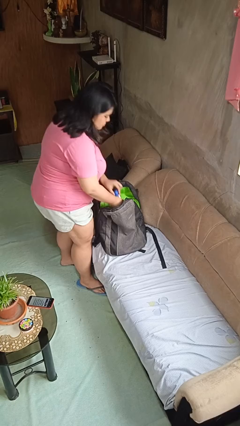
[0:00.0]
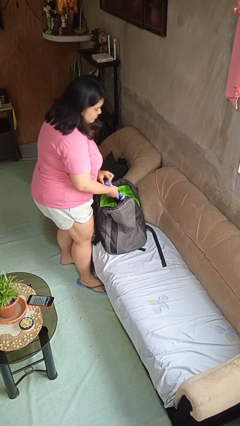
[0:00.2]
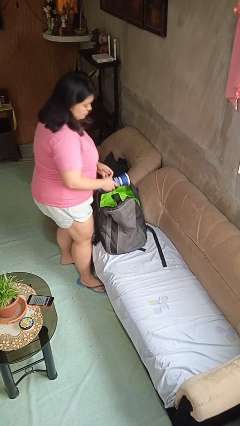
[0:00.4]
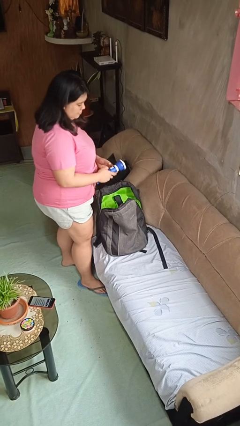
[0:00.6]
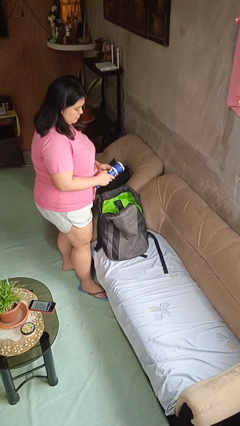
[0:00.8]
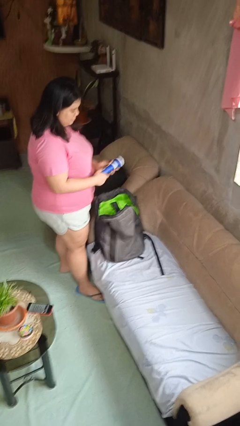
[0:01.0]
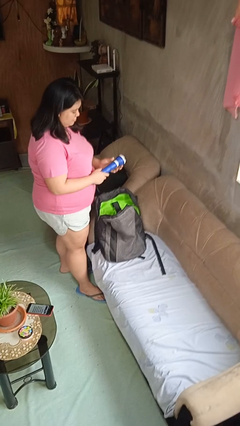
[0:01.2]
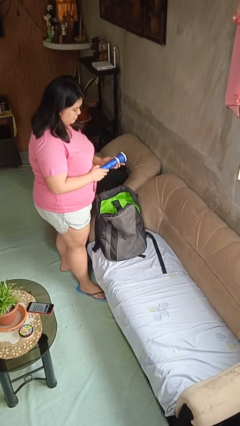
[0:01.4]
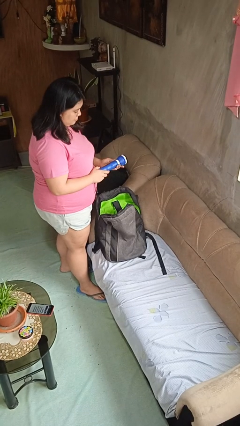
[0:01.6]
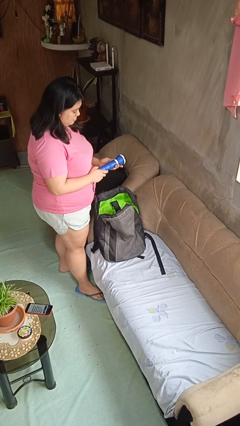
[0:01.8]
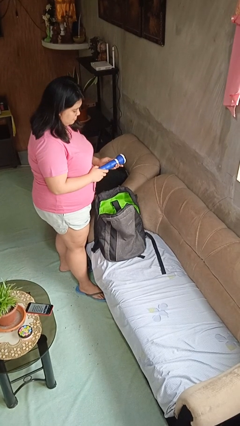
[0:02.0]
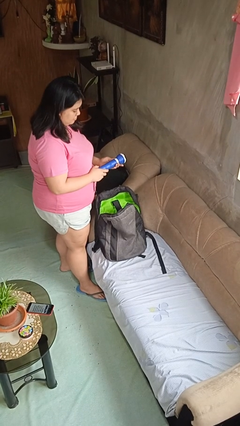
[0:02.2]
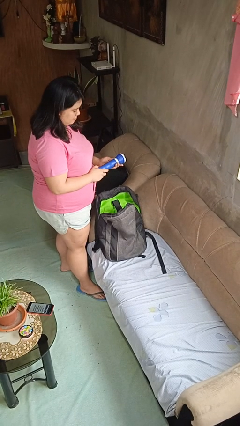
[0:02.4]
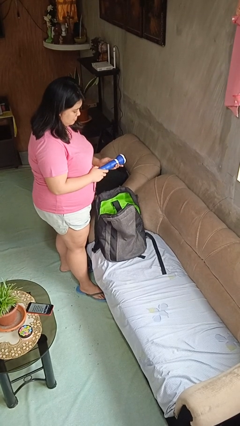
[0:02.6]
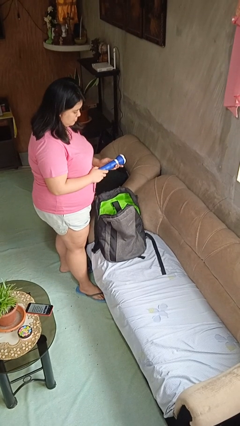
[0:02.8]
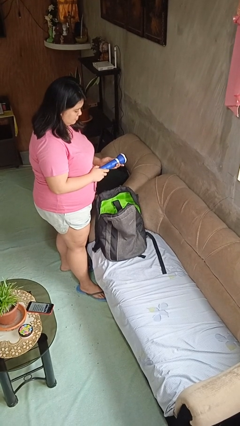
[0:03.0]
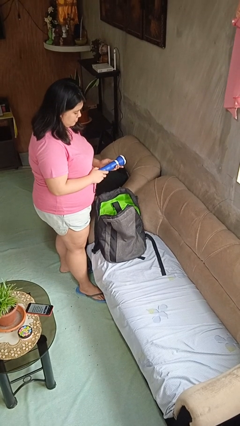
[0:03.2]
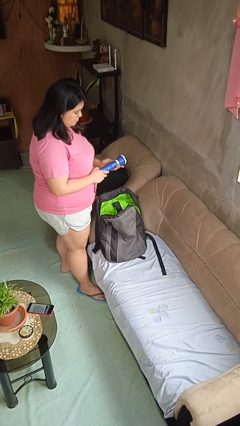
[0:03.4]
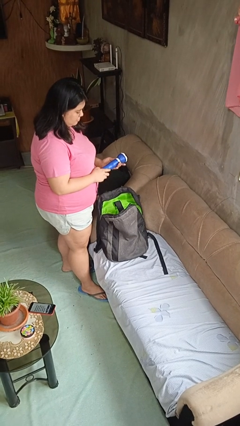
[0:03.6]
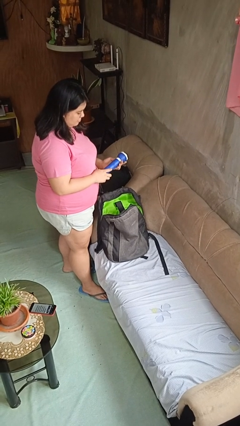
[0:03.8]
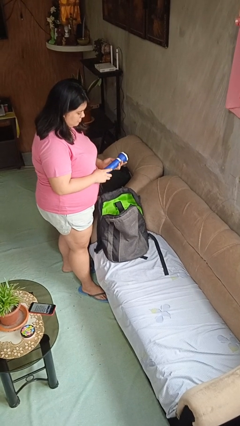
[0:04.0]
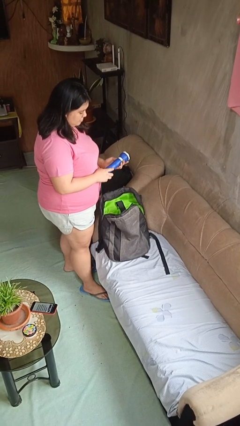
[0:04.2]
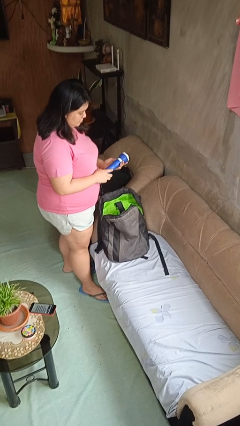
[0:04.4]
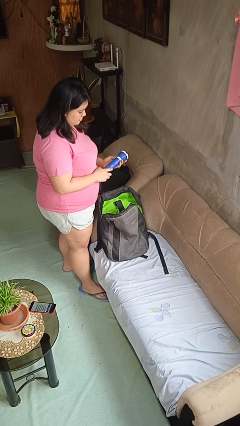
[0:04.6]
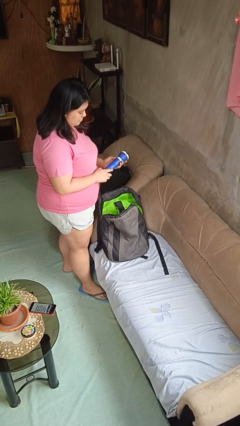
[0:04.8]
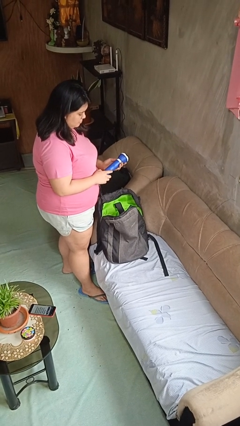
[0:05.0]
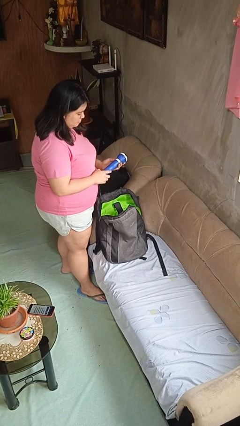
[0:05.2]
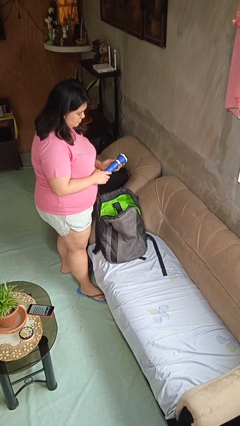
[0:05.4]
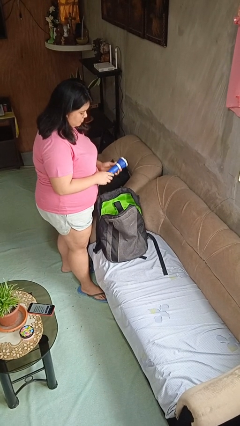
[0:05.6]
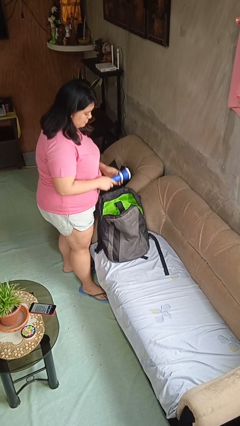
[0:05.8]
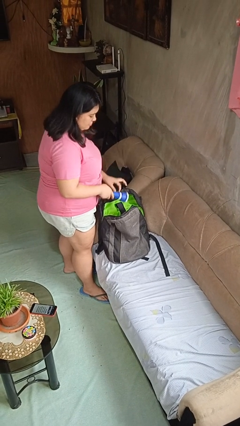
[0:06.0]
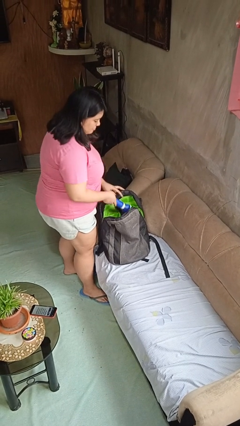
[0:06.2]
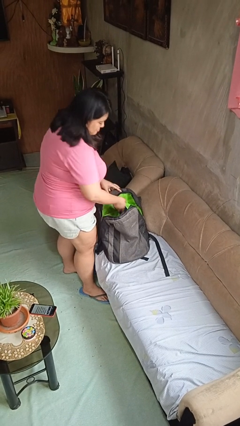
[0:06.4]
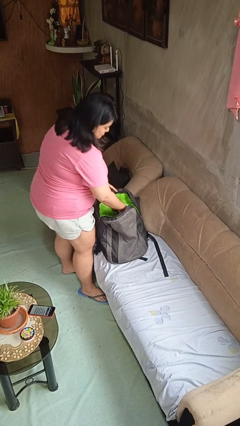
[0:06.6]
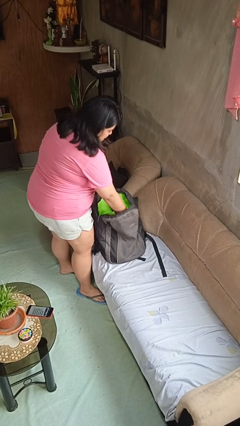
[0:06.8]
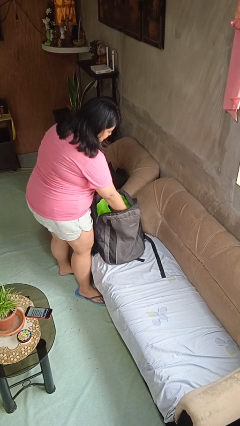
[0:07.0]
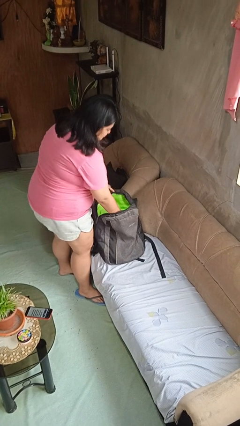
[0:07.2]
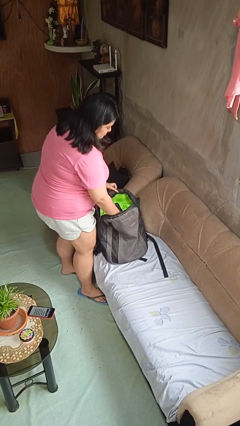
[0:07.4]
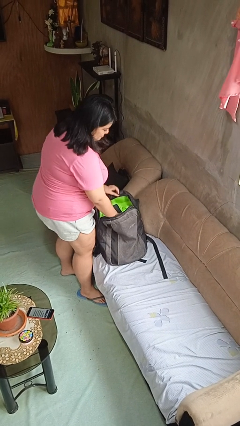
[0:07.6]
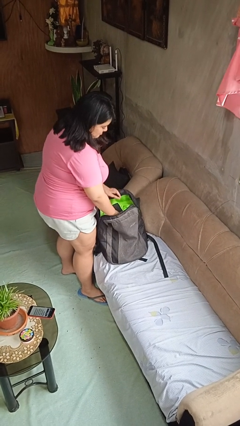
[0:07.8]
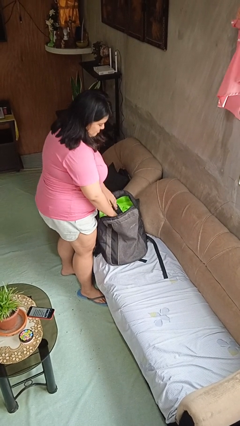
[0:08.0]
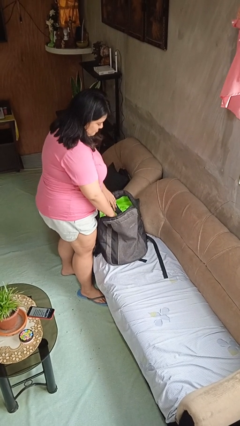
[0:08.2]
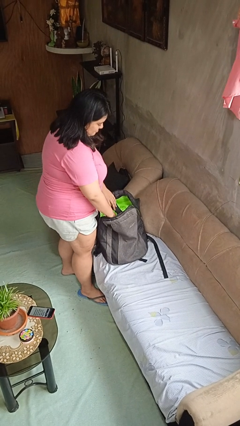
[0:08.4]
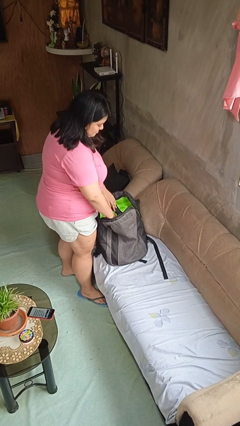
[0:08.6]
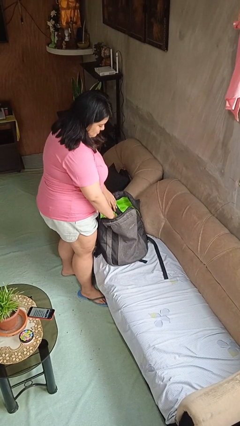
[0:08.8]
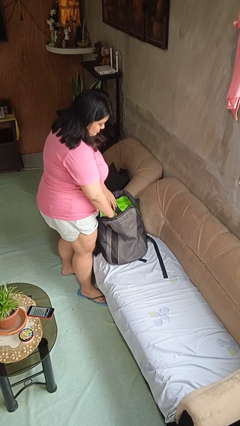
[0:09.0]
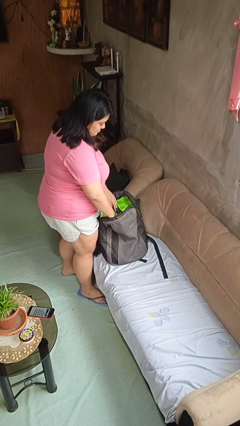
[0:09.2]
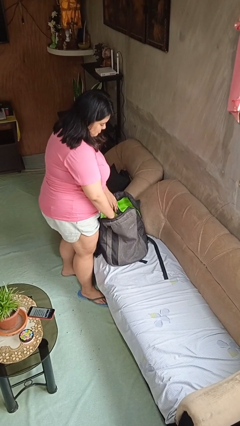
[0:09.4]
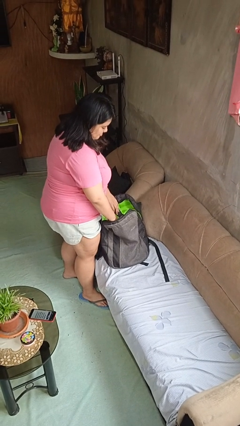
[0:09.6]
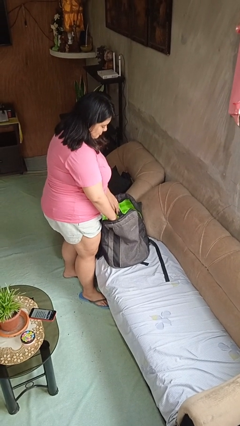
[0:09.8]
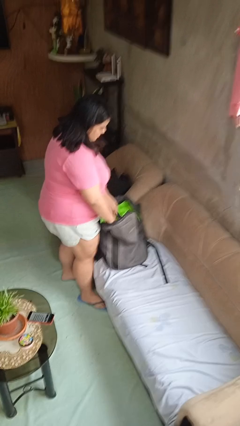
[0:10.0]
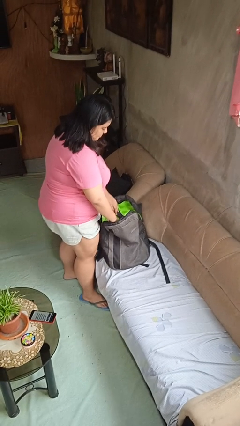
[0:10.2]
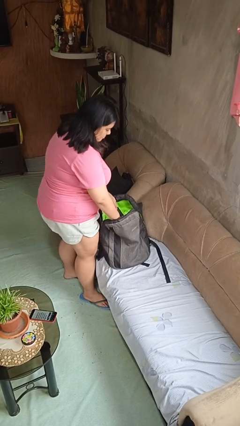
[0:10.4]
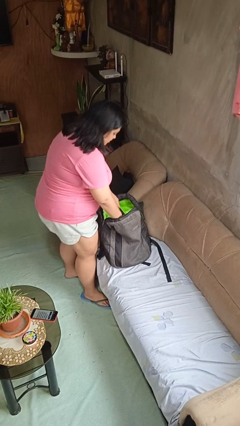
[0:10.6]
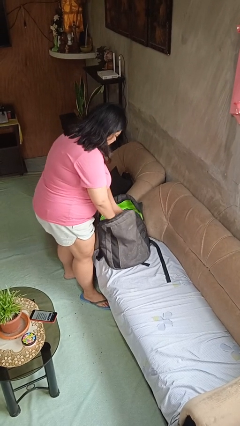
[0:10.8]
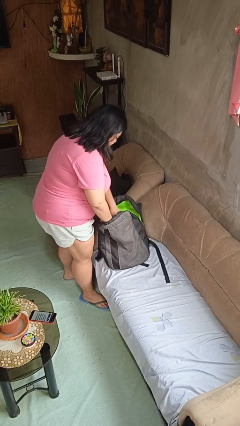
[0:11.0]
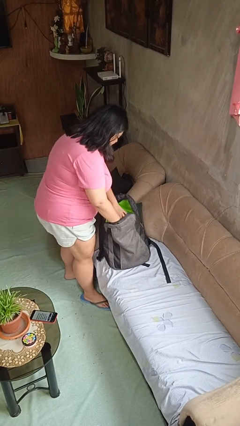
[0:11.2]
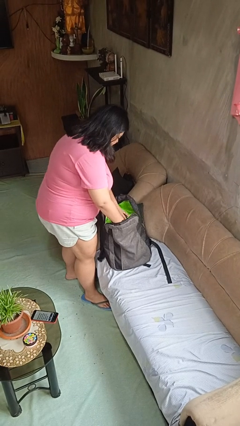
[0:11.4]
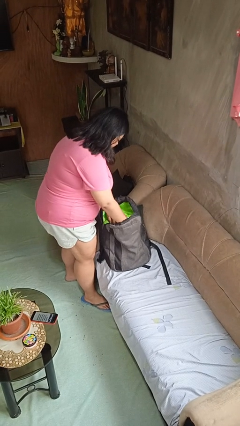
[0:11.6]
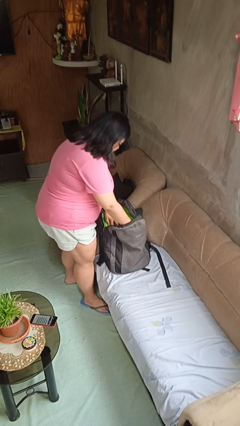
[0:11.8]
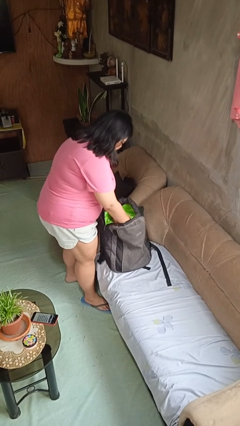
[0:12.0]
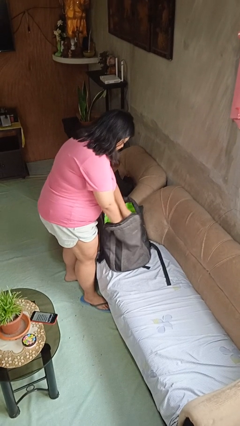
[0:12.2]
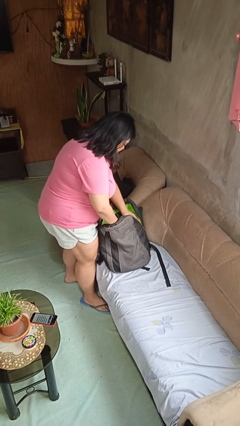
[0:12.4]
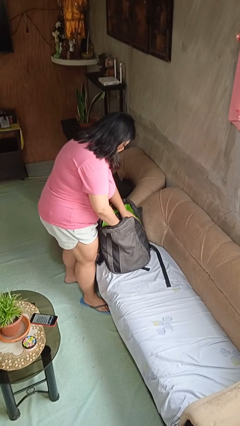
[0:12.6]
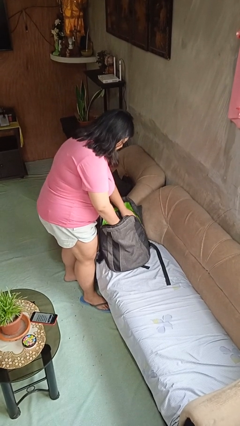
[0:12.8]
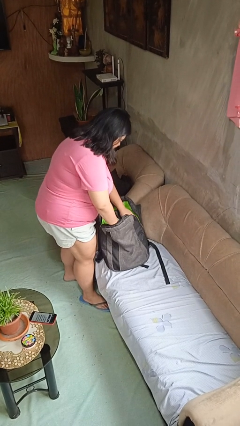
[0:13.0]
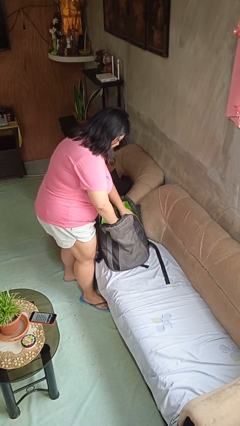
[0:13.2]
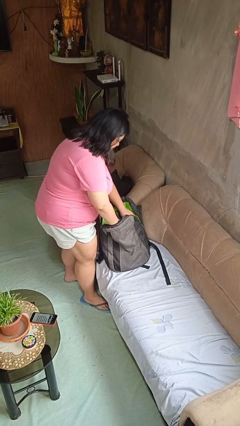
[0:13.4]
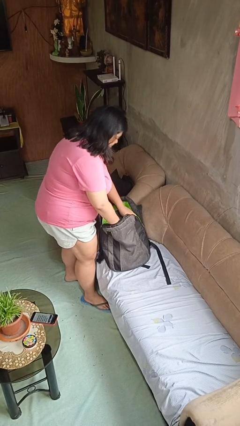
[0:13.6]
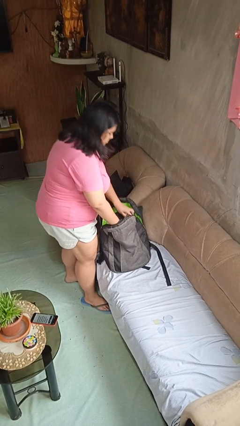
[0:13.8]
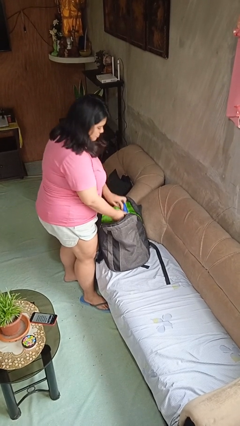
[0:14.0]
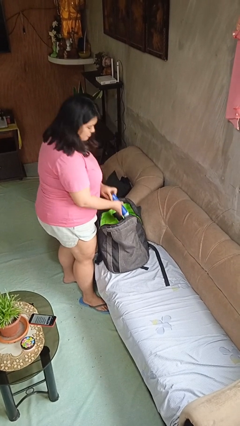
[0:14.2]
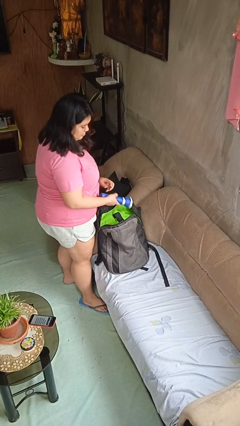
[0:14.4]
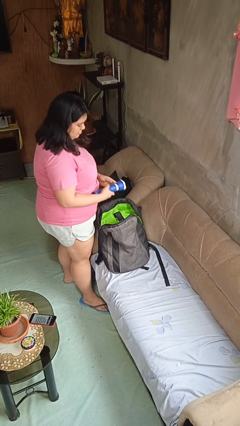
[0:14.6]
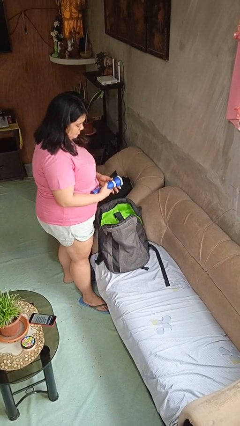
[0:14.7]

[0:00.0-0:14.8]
person takes object from backpack

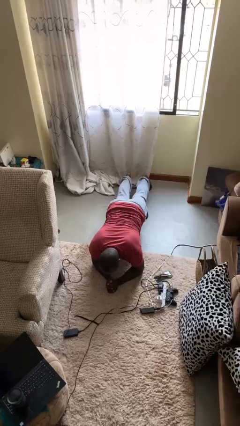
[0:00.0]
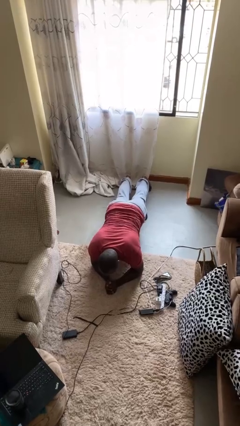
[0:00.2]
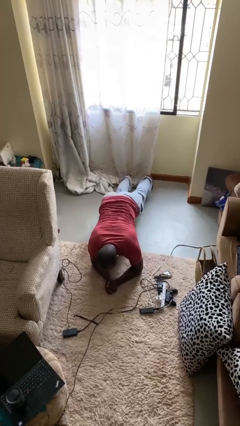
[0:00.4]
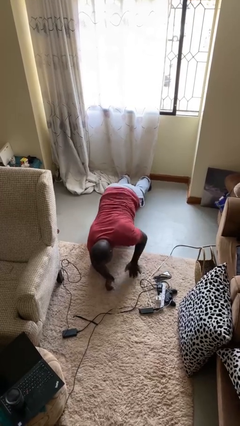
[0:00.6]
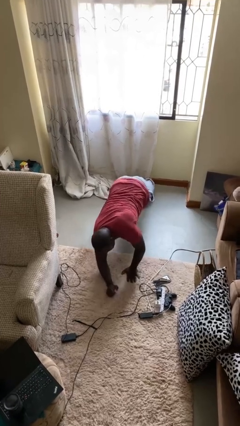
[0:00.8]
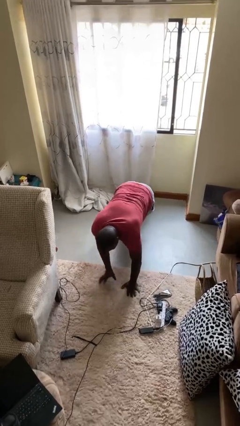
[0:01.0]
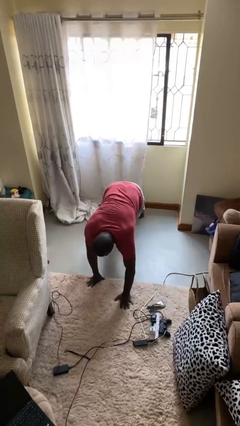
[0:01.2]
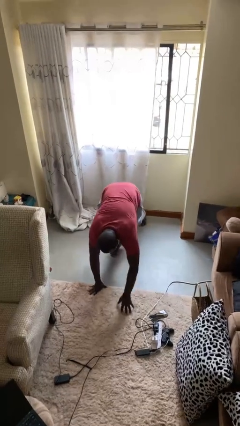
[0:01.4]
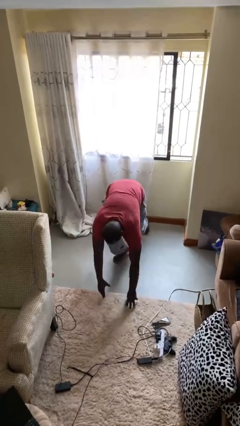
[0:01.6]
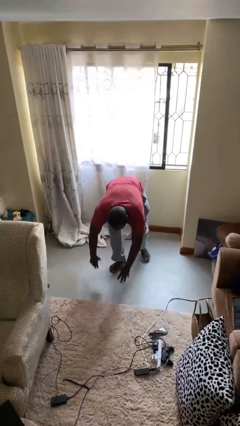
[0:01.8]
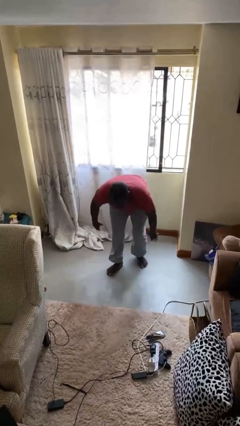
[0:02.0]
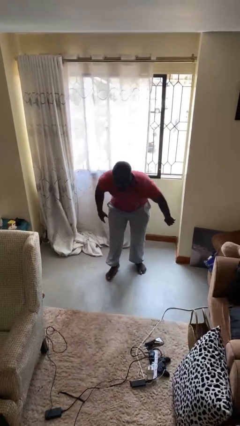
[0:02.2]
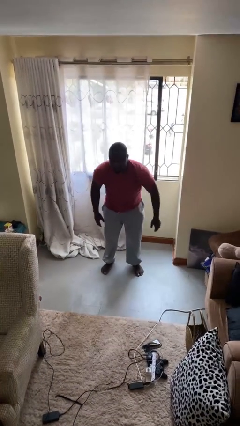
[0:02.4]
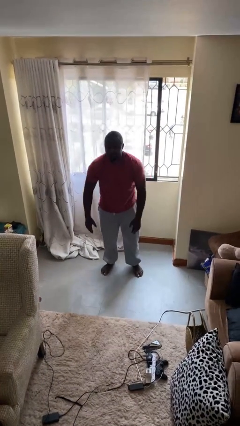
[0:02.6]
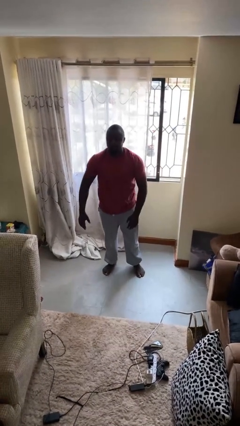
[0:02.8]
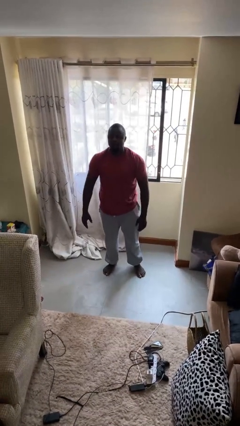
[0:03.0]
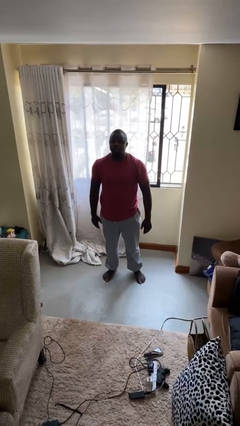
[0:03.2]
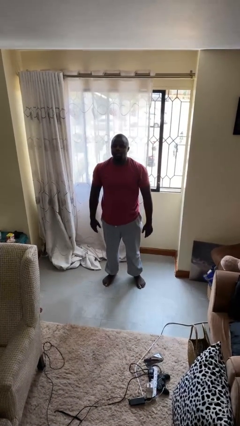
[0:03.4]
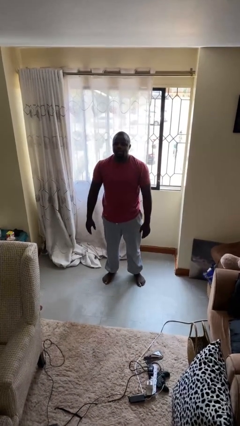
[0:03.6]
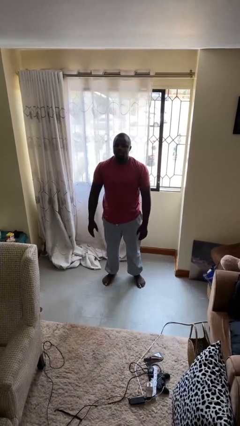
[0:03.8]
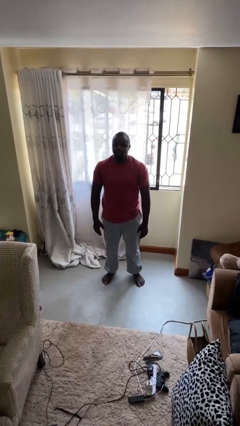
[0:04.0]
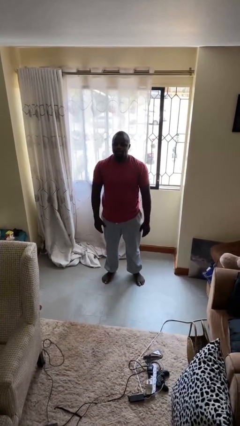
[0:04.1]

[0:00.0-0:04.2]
person stands up from floor
